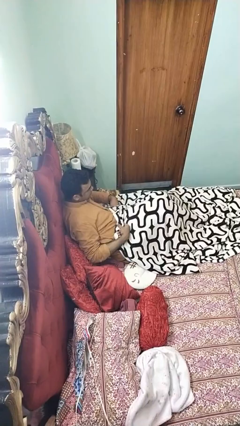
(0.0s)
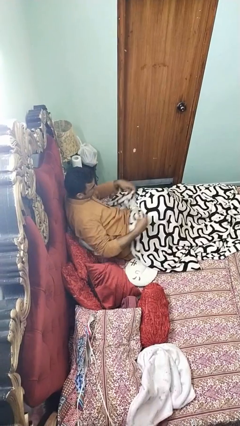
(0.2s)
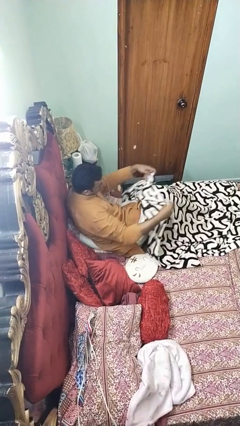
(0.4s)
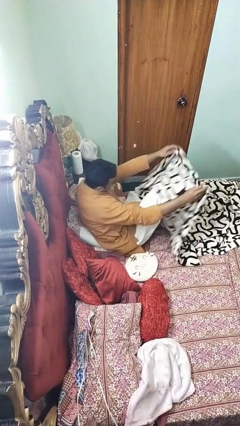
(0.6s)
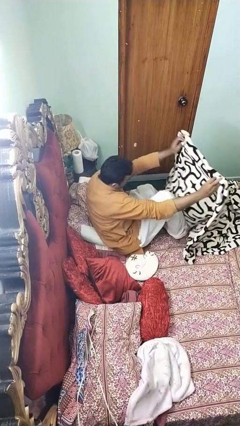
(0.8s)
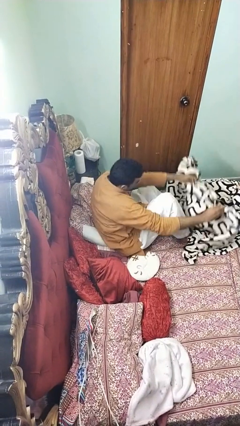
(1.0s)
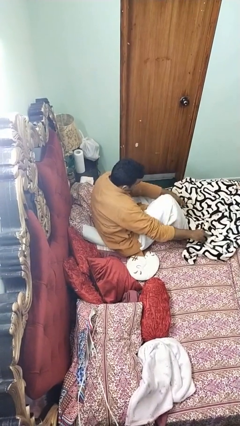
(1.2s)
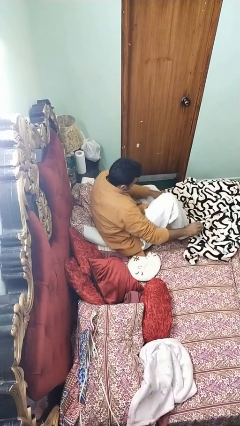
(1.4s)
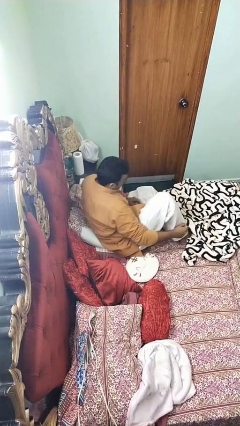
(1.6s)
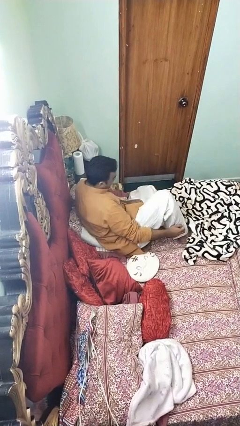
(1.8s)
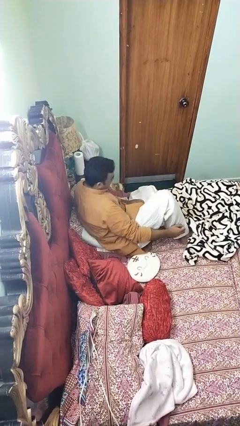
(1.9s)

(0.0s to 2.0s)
person uncovers with blanket

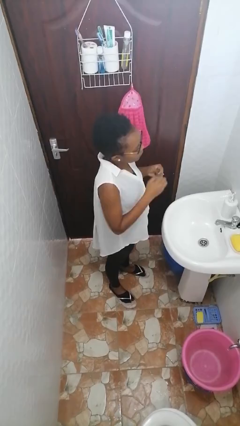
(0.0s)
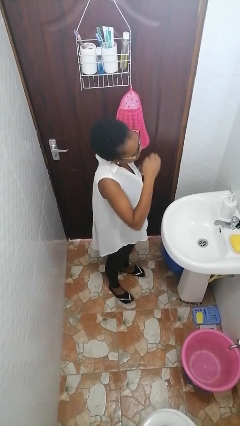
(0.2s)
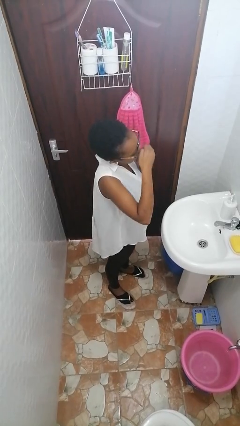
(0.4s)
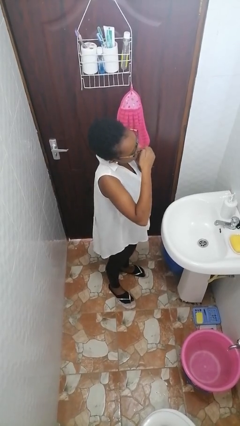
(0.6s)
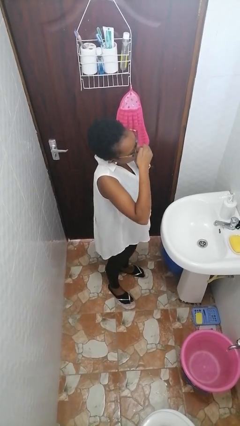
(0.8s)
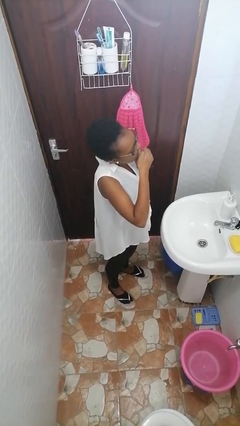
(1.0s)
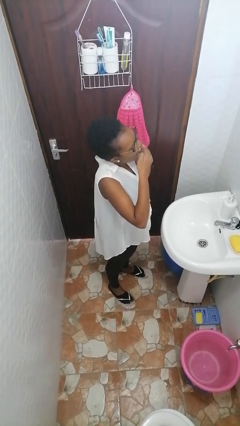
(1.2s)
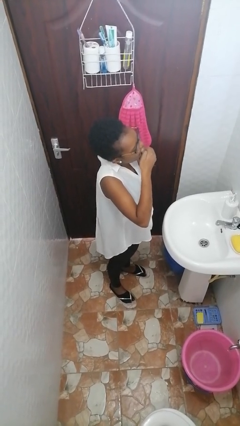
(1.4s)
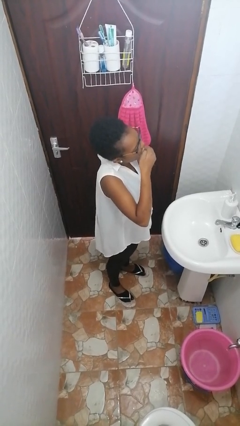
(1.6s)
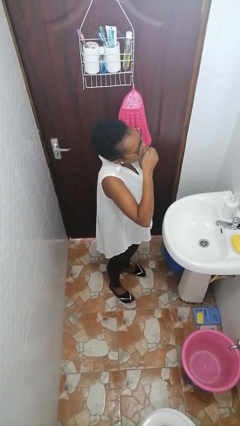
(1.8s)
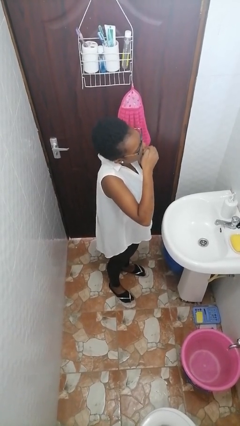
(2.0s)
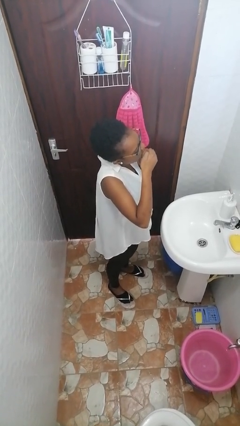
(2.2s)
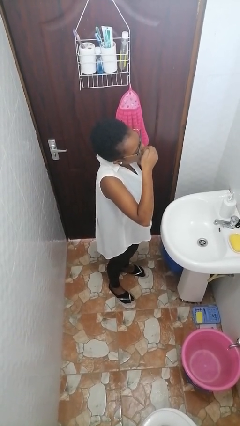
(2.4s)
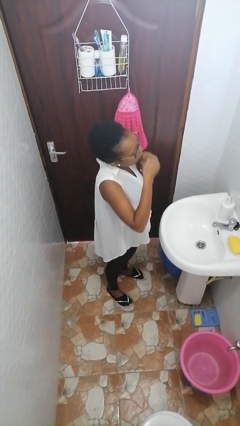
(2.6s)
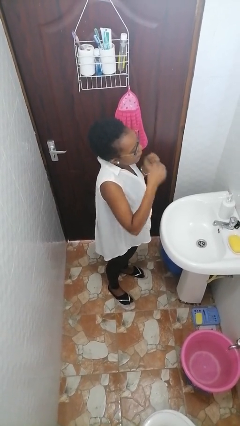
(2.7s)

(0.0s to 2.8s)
person flosses

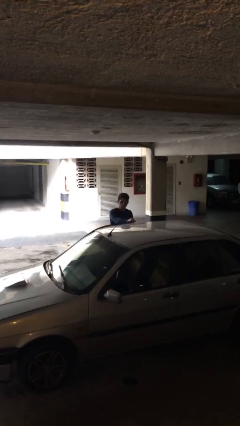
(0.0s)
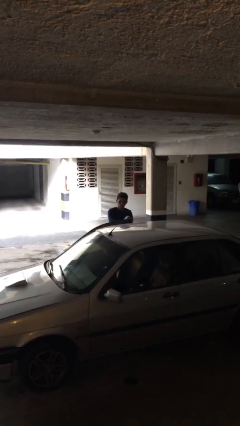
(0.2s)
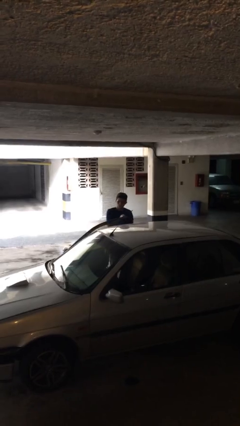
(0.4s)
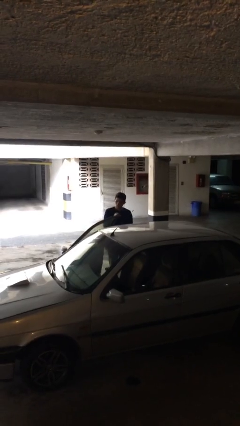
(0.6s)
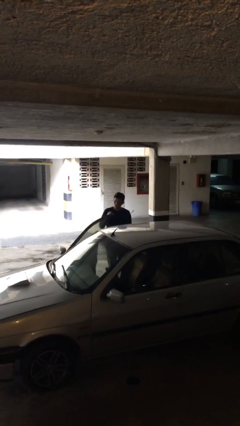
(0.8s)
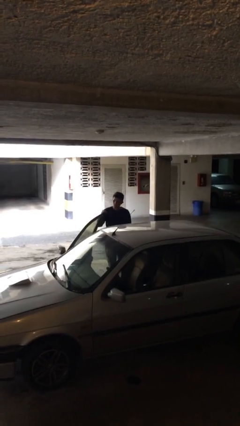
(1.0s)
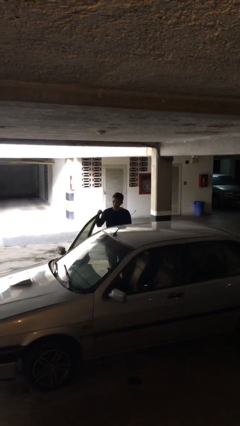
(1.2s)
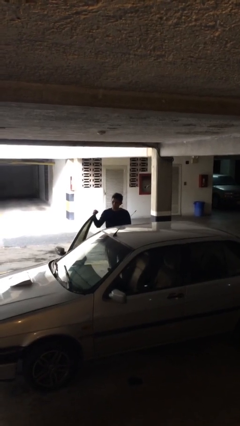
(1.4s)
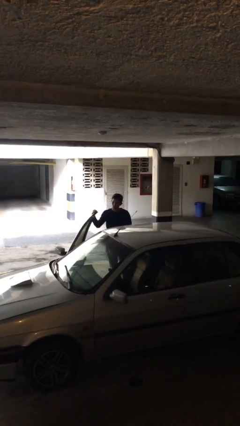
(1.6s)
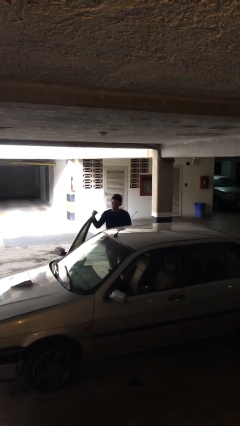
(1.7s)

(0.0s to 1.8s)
person opens car door

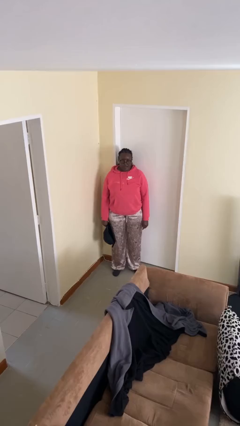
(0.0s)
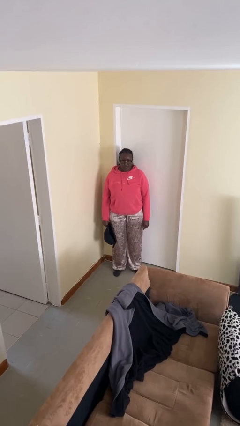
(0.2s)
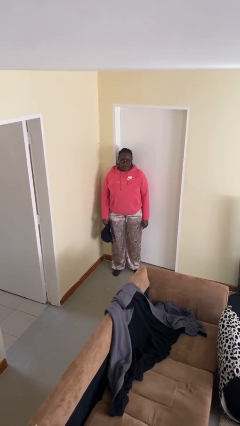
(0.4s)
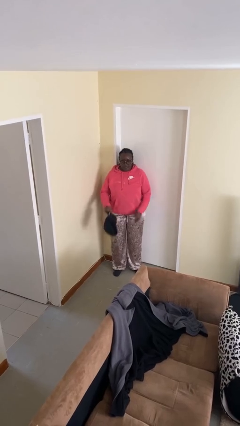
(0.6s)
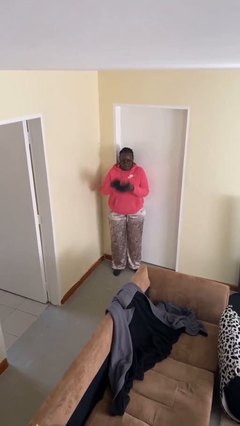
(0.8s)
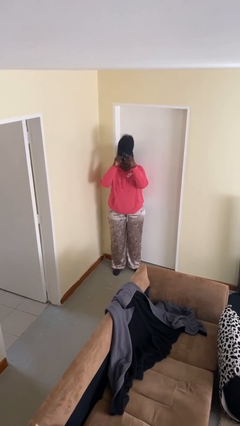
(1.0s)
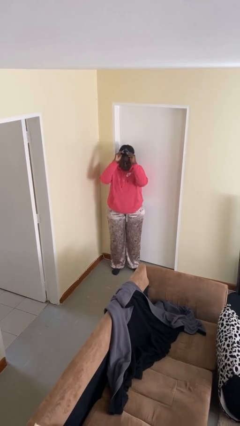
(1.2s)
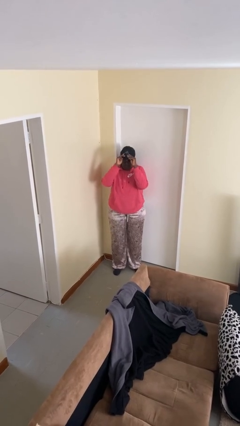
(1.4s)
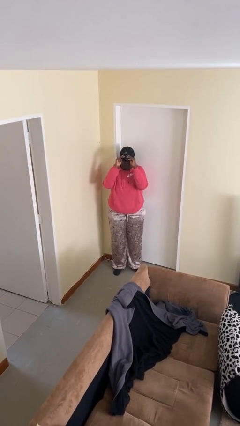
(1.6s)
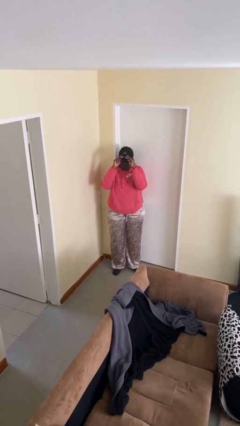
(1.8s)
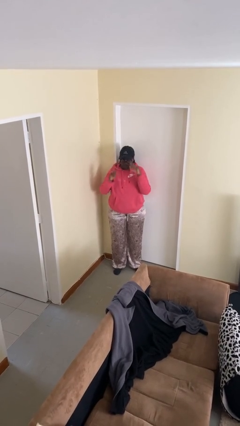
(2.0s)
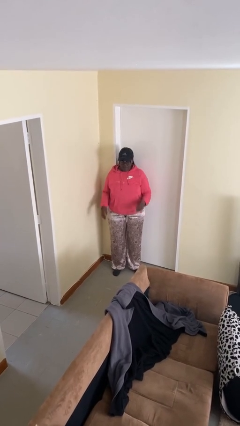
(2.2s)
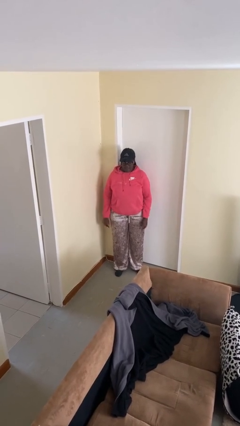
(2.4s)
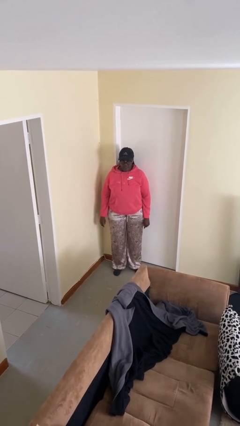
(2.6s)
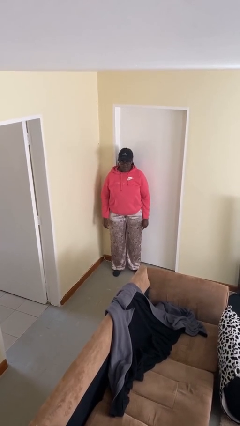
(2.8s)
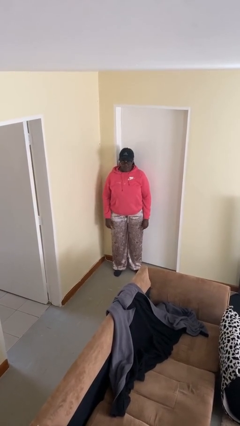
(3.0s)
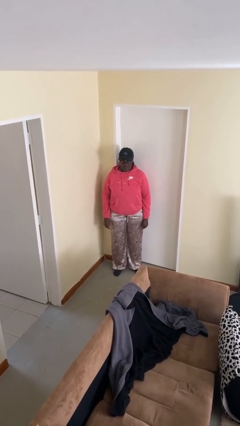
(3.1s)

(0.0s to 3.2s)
person puts on hat

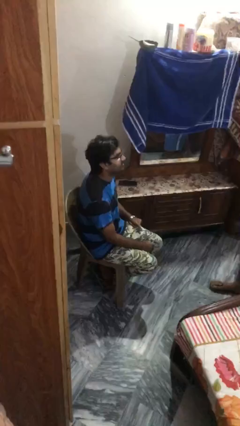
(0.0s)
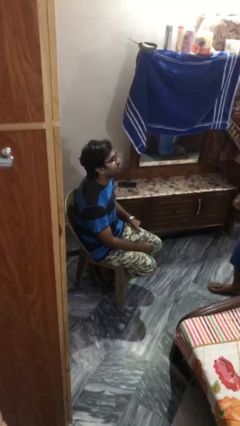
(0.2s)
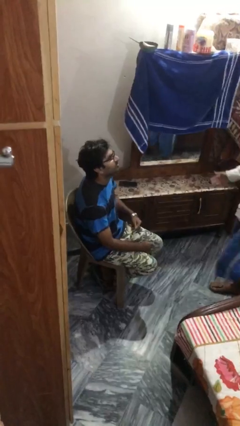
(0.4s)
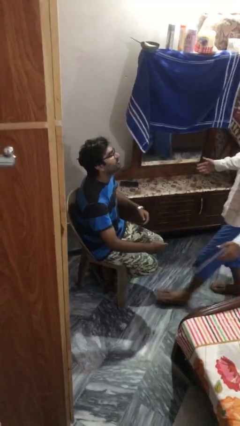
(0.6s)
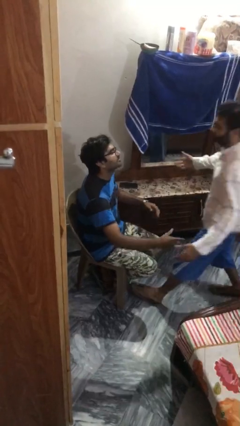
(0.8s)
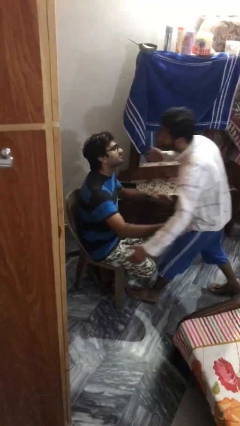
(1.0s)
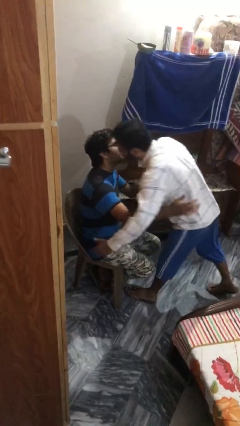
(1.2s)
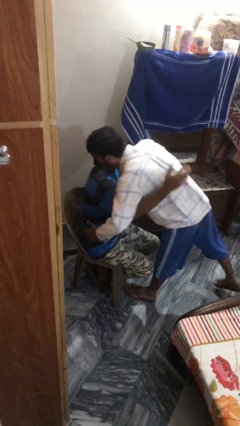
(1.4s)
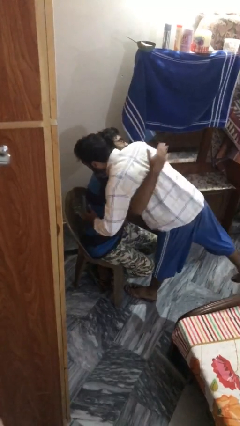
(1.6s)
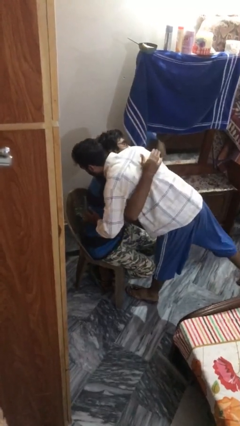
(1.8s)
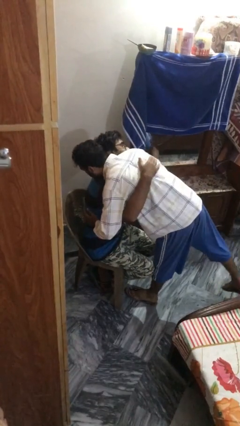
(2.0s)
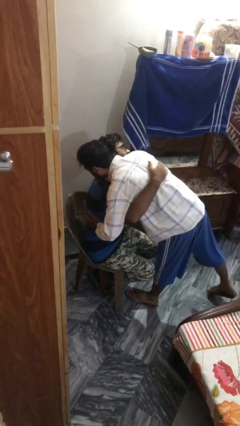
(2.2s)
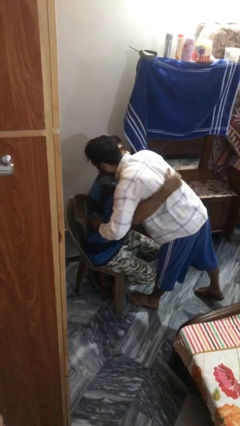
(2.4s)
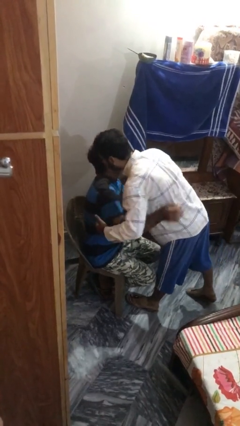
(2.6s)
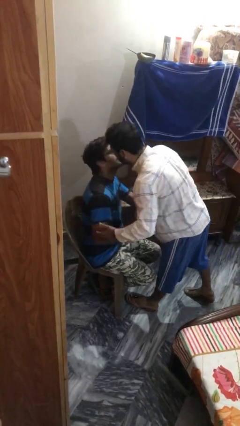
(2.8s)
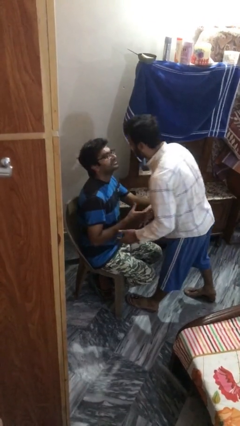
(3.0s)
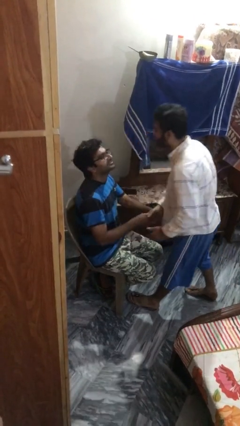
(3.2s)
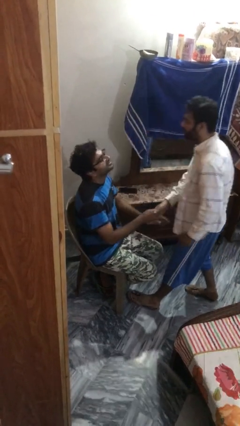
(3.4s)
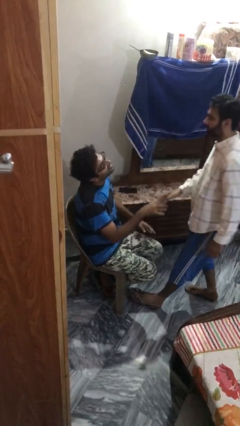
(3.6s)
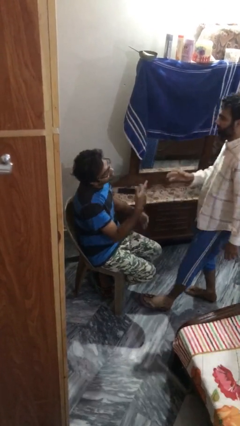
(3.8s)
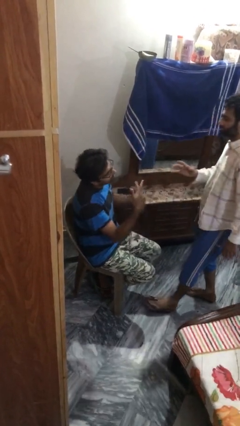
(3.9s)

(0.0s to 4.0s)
person embraces person

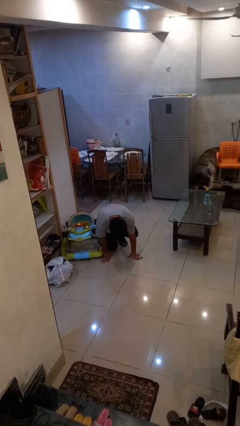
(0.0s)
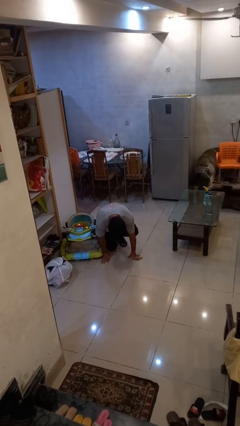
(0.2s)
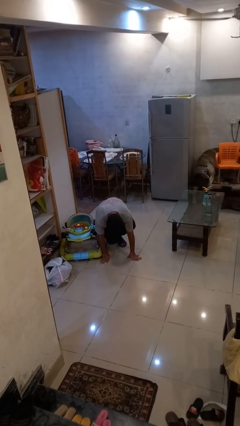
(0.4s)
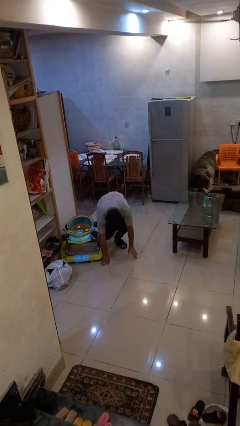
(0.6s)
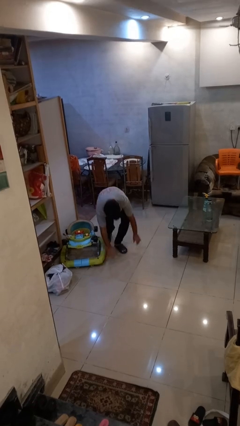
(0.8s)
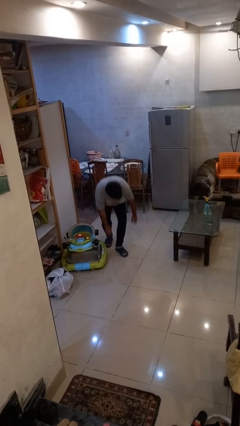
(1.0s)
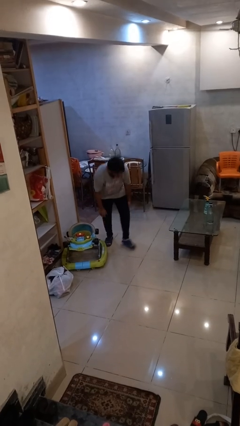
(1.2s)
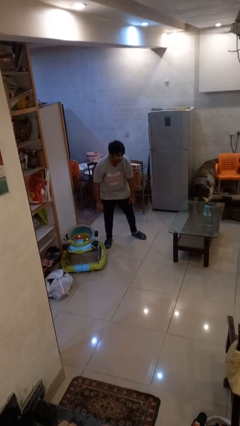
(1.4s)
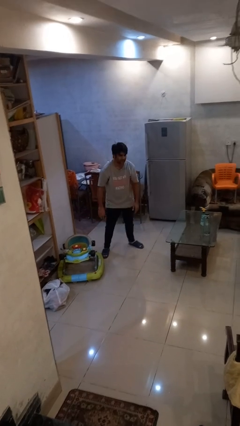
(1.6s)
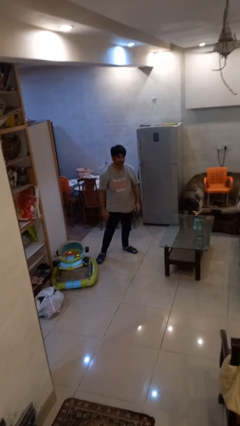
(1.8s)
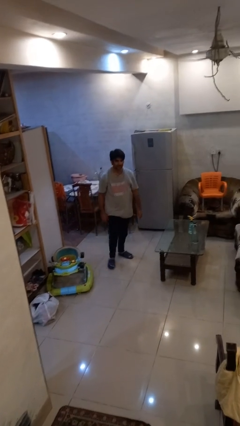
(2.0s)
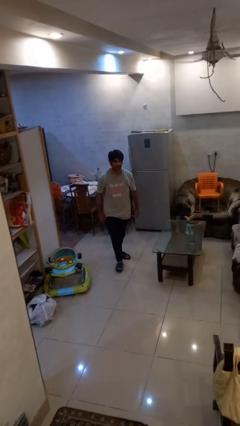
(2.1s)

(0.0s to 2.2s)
person stands up from floor

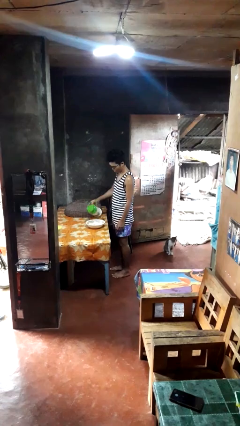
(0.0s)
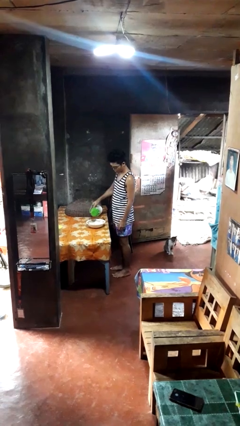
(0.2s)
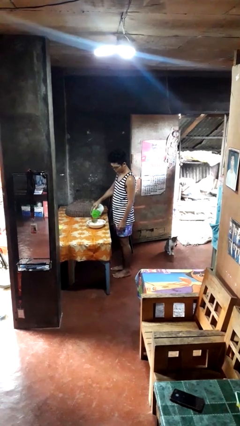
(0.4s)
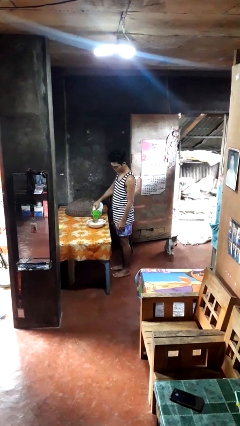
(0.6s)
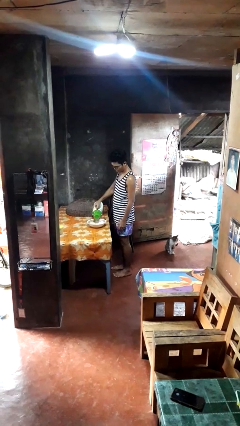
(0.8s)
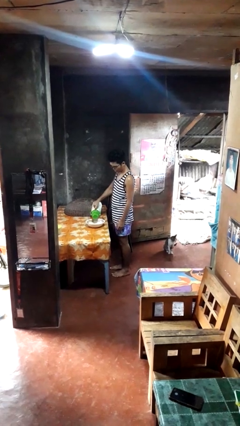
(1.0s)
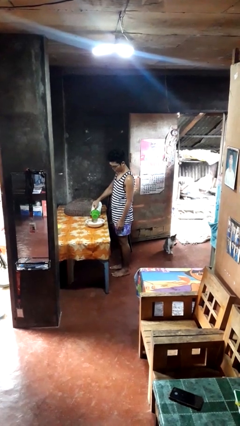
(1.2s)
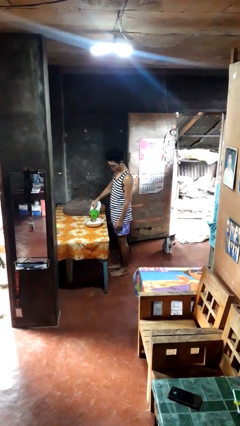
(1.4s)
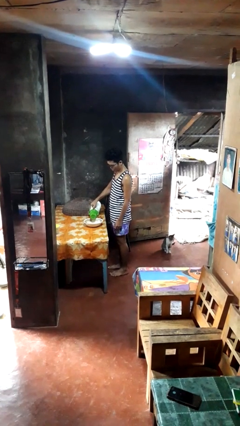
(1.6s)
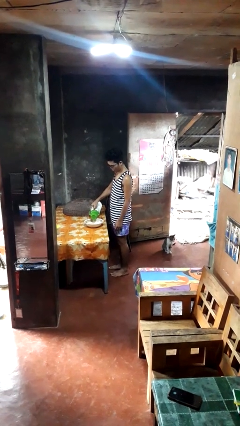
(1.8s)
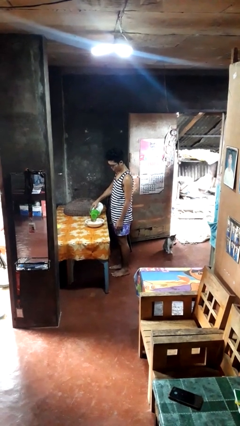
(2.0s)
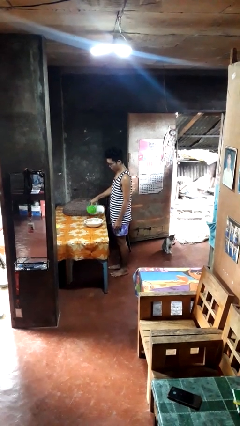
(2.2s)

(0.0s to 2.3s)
person pours into bowl
